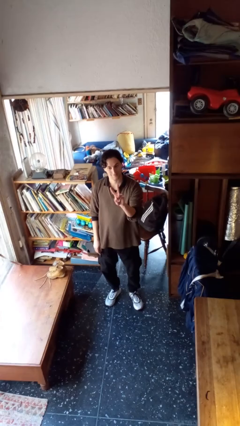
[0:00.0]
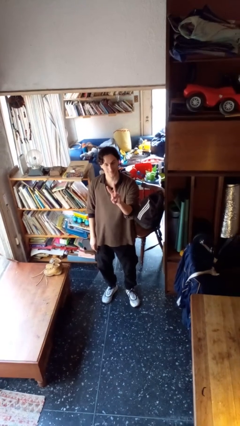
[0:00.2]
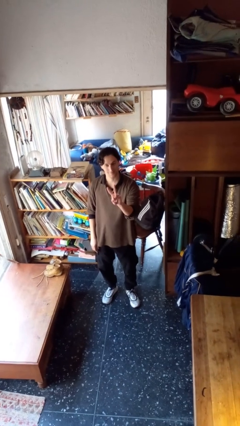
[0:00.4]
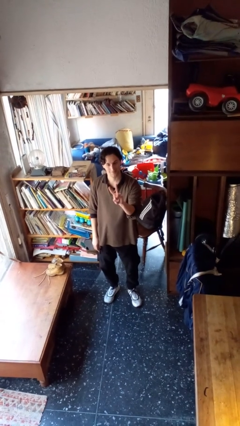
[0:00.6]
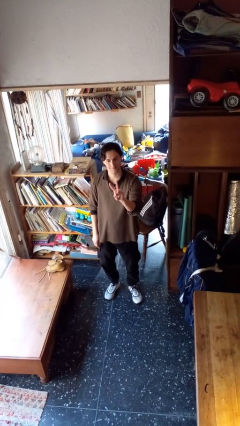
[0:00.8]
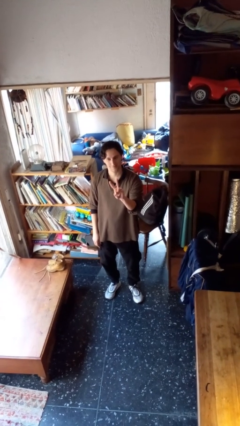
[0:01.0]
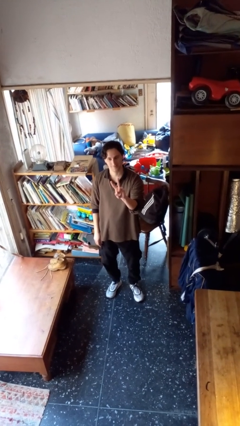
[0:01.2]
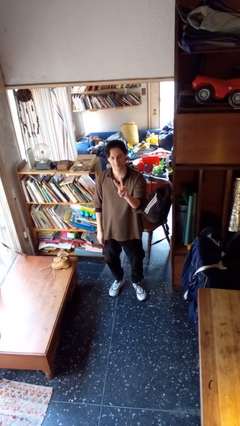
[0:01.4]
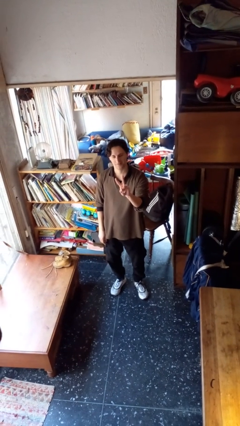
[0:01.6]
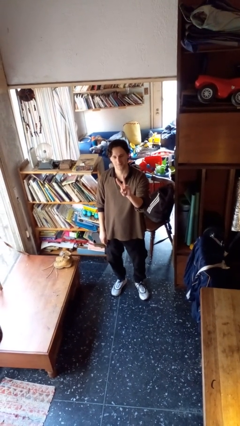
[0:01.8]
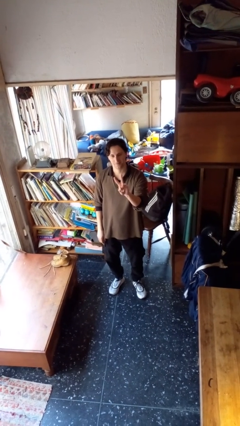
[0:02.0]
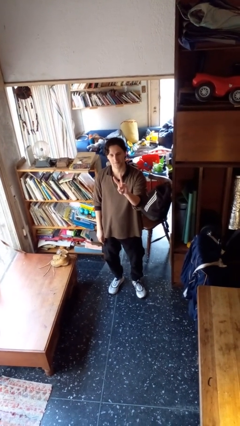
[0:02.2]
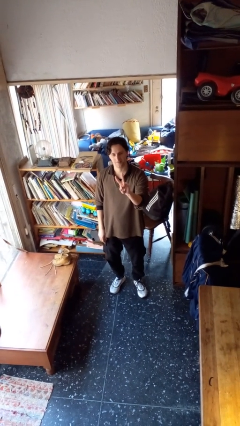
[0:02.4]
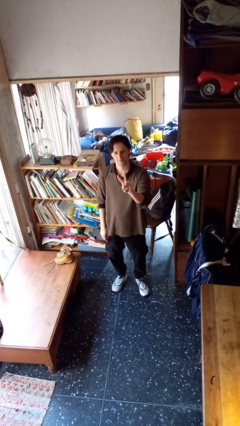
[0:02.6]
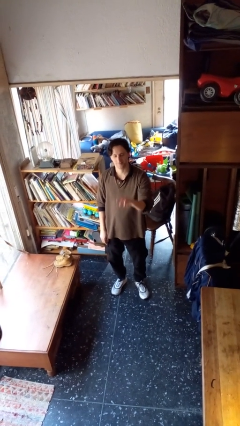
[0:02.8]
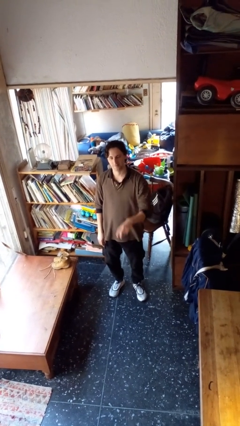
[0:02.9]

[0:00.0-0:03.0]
person gestures peace

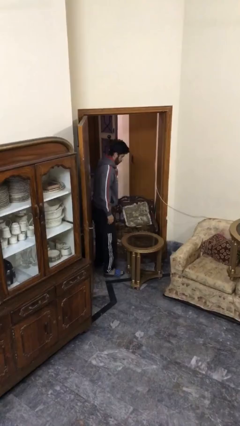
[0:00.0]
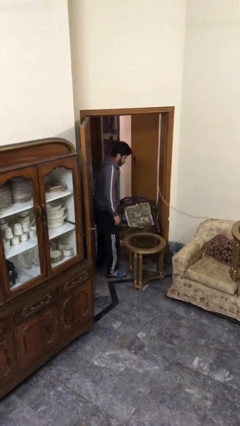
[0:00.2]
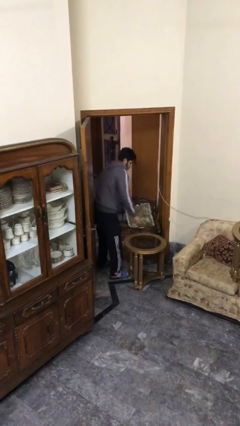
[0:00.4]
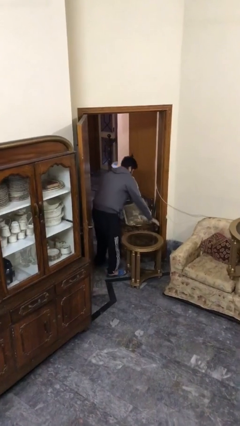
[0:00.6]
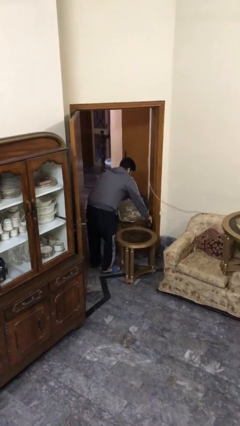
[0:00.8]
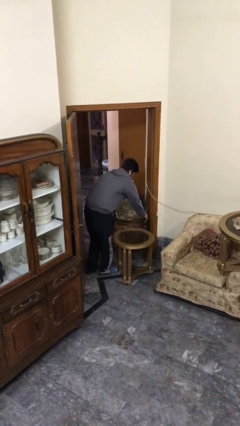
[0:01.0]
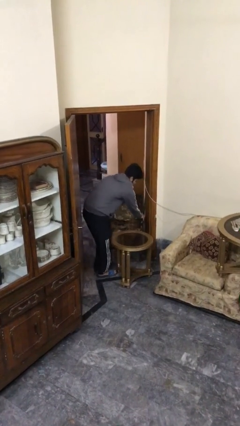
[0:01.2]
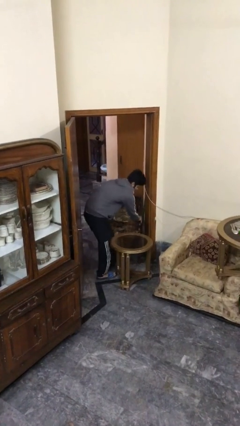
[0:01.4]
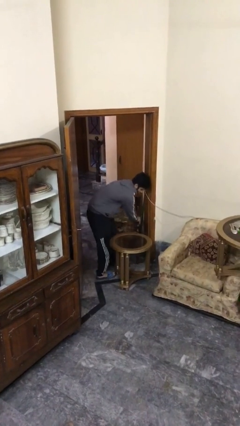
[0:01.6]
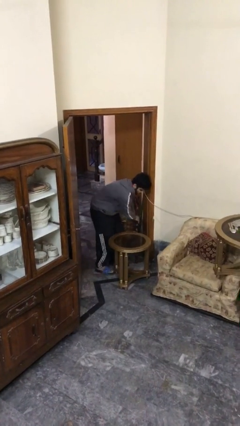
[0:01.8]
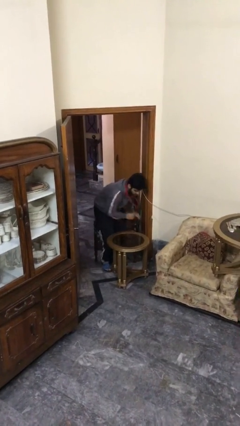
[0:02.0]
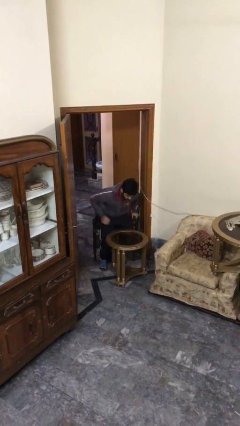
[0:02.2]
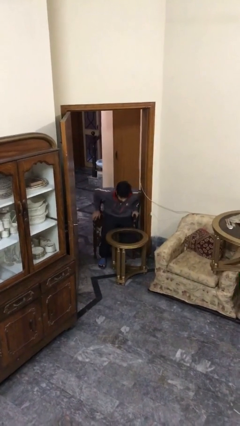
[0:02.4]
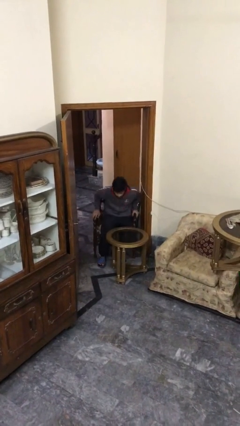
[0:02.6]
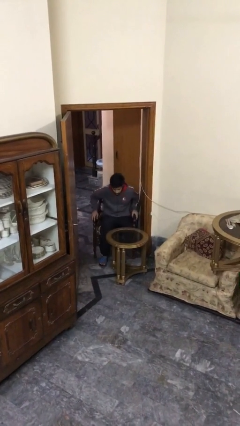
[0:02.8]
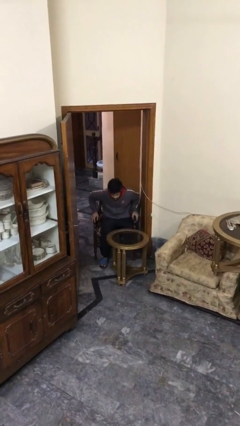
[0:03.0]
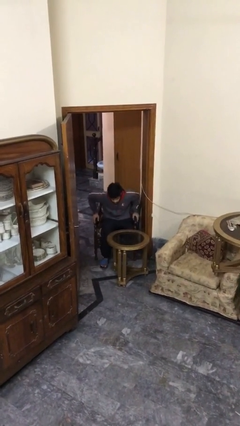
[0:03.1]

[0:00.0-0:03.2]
person sits down

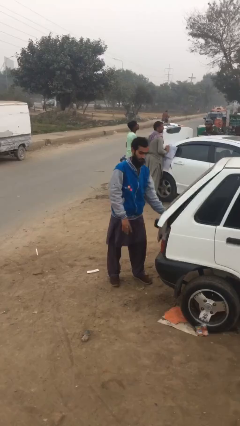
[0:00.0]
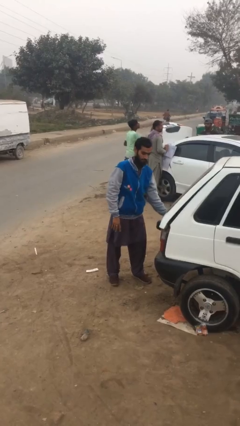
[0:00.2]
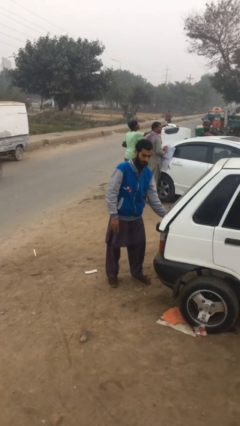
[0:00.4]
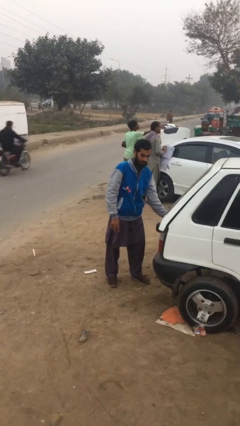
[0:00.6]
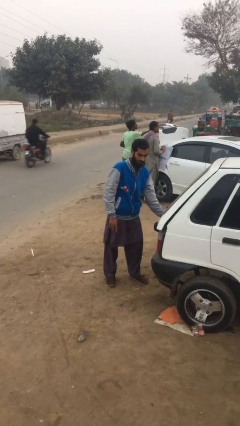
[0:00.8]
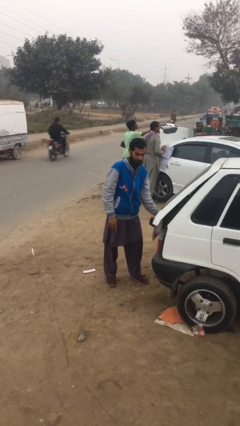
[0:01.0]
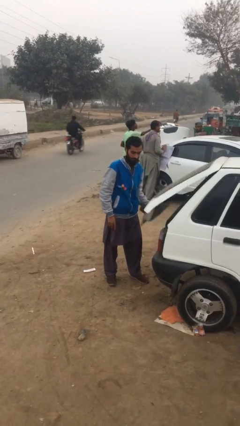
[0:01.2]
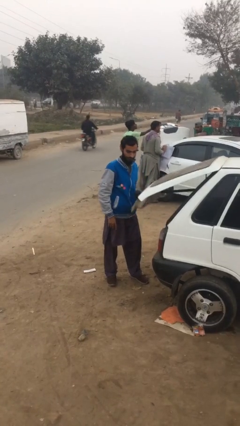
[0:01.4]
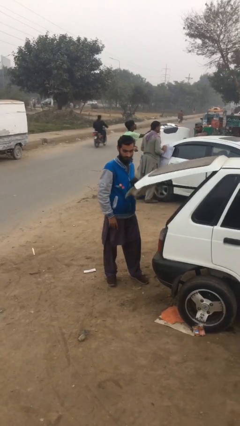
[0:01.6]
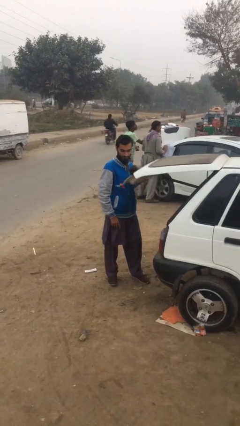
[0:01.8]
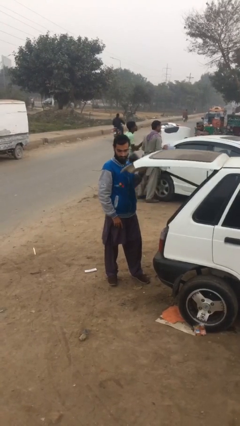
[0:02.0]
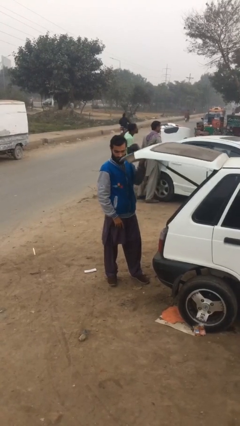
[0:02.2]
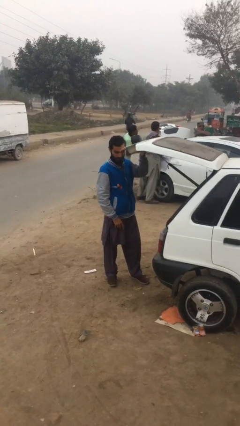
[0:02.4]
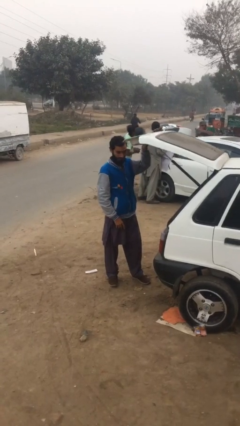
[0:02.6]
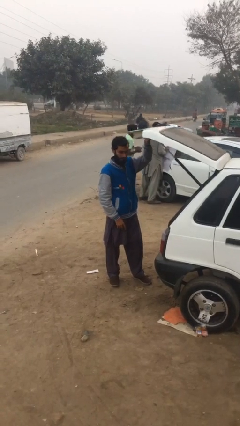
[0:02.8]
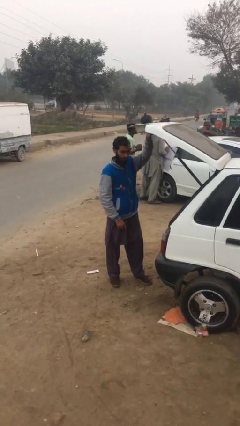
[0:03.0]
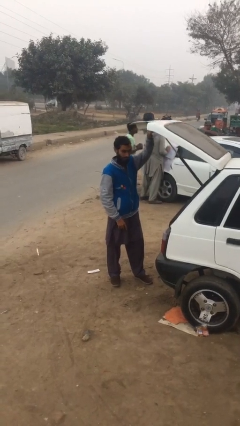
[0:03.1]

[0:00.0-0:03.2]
person opens car trunk

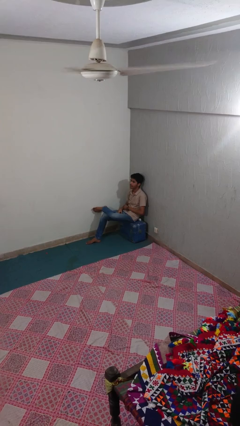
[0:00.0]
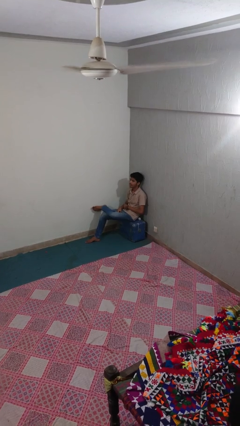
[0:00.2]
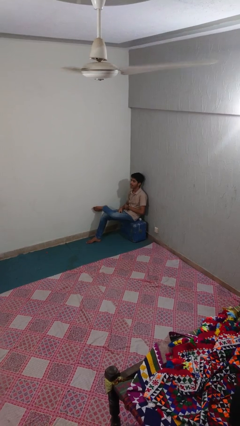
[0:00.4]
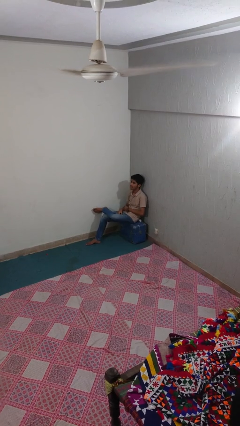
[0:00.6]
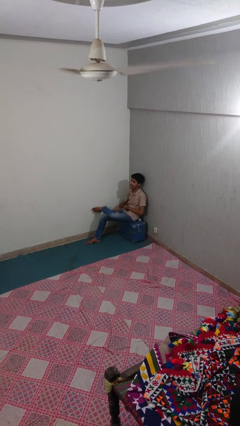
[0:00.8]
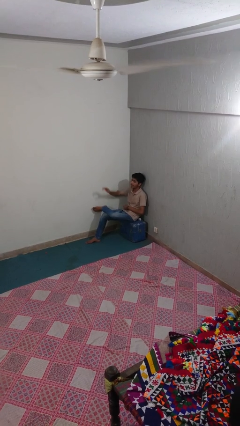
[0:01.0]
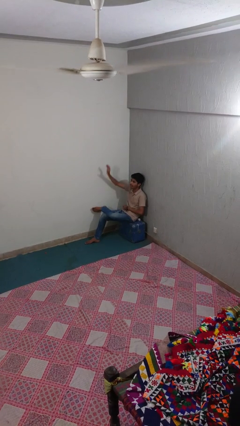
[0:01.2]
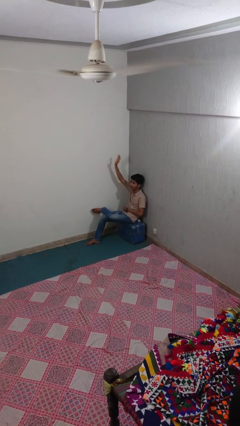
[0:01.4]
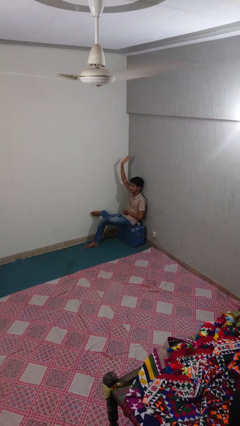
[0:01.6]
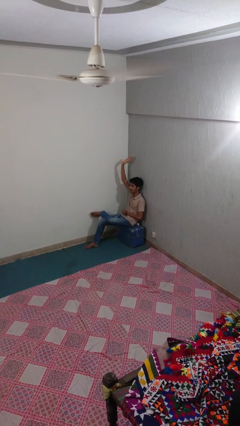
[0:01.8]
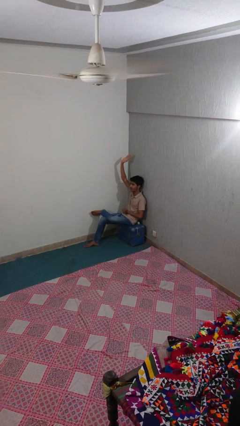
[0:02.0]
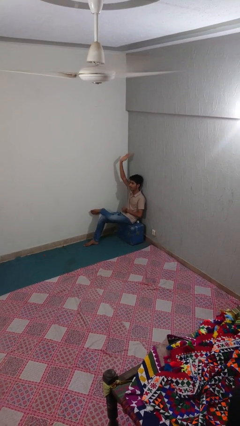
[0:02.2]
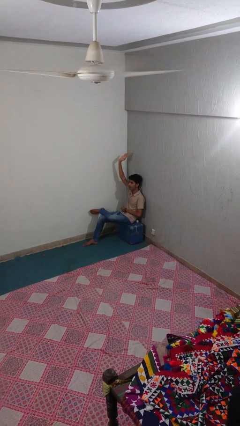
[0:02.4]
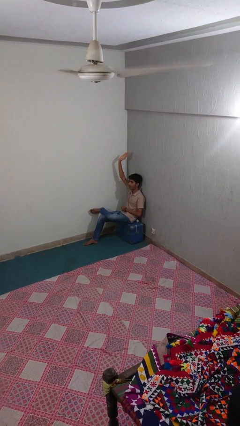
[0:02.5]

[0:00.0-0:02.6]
person gestures raise hand

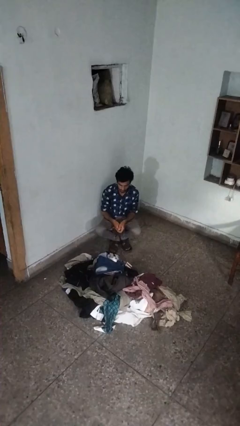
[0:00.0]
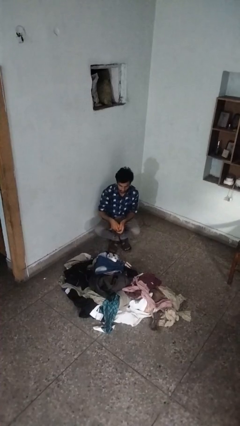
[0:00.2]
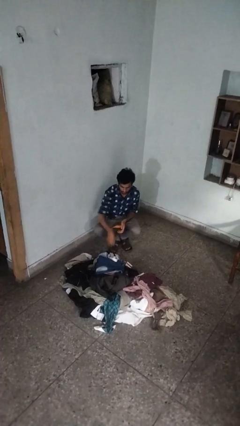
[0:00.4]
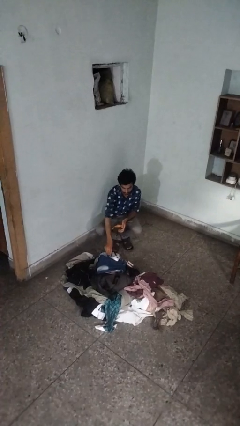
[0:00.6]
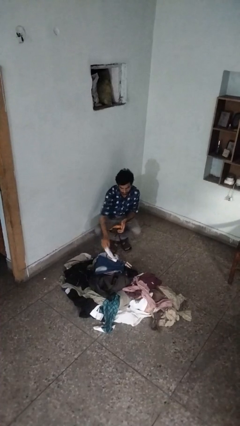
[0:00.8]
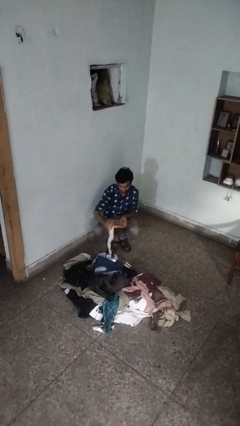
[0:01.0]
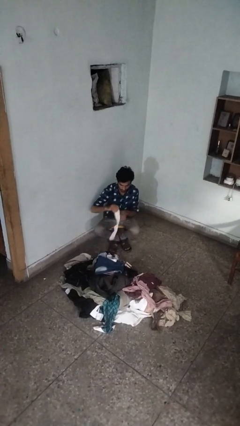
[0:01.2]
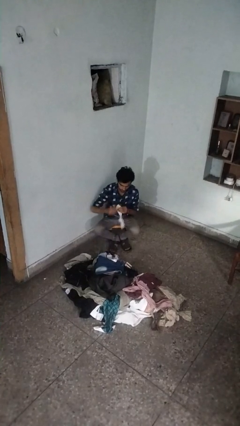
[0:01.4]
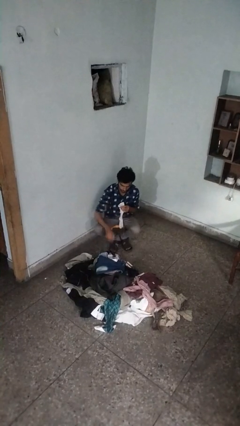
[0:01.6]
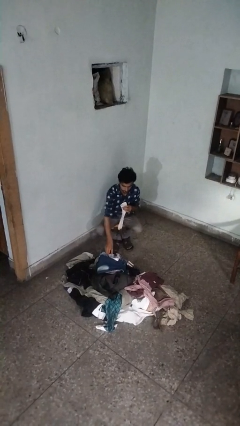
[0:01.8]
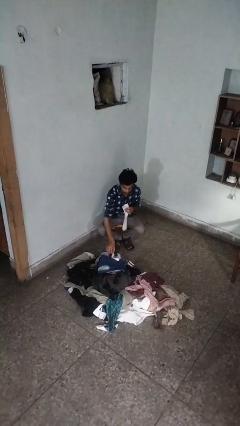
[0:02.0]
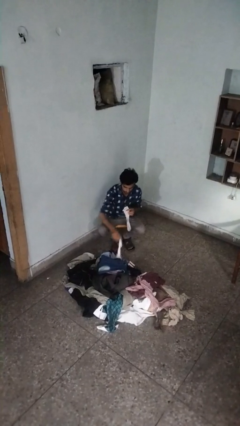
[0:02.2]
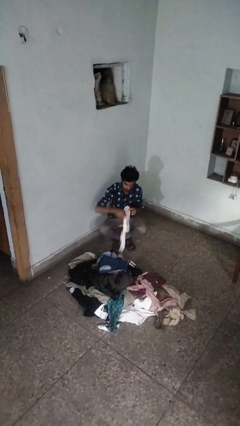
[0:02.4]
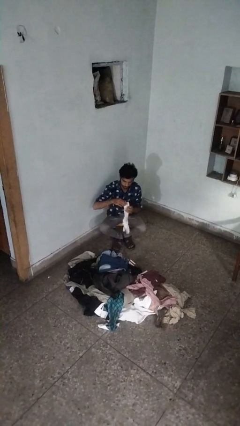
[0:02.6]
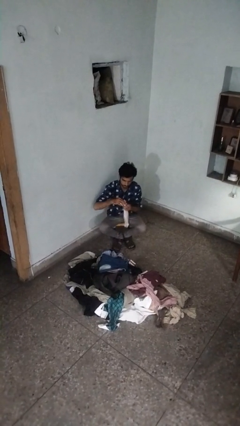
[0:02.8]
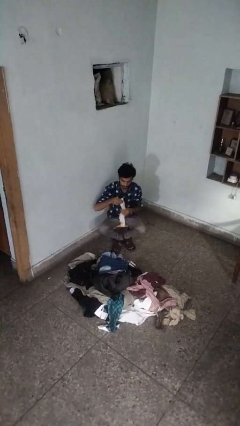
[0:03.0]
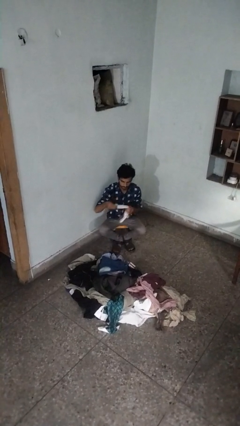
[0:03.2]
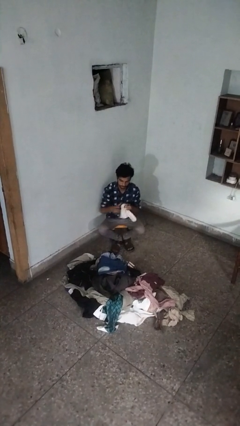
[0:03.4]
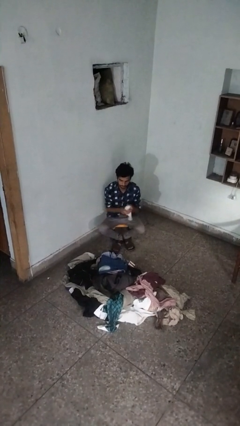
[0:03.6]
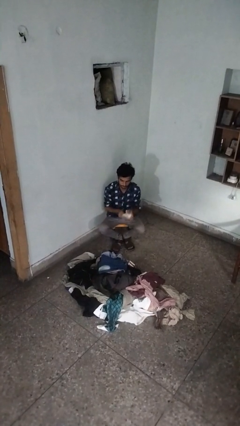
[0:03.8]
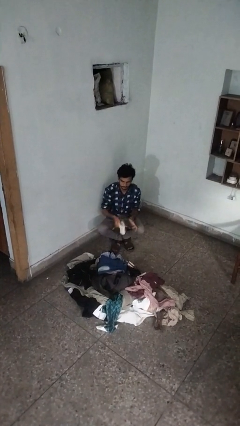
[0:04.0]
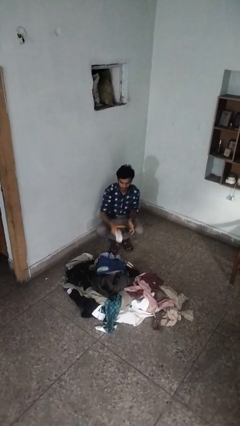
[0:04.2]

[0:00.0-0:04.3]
person folds socks

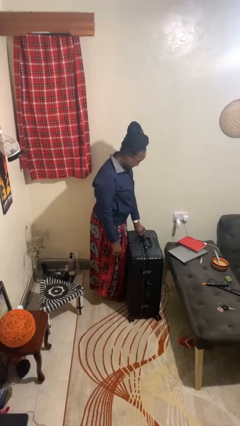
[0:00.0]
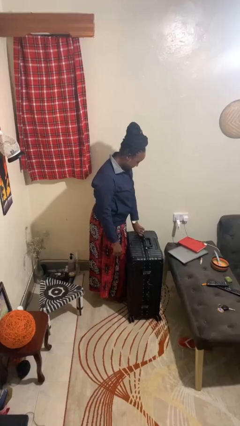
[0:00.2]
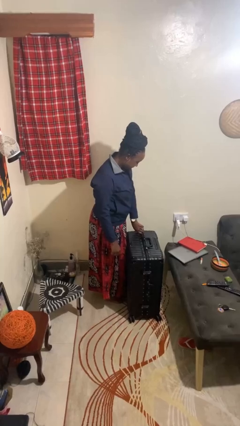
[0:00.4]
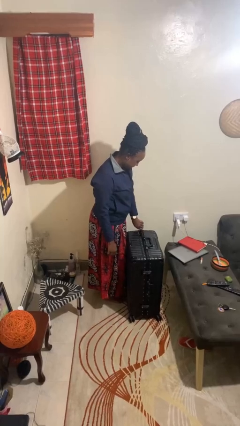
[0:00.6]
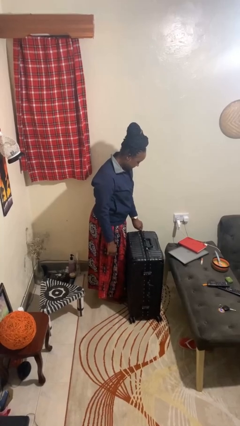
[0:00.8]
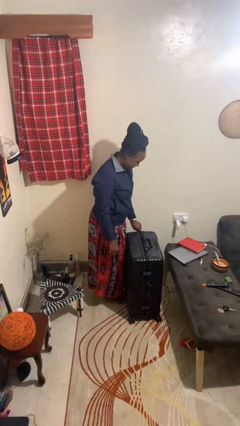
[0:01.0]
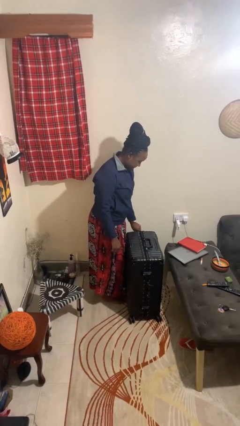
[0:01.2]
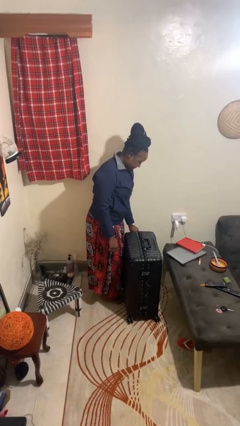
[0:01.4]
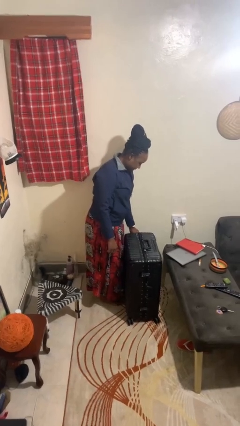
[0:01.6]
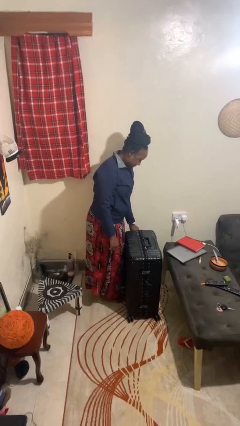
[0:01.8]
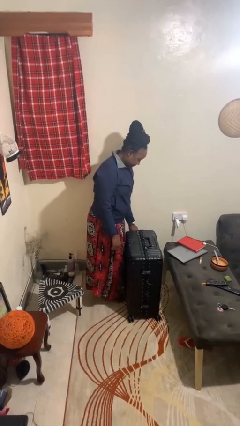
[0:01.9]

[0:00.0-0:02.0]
person closes suitcase
